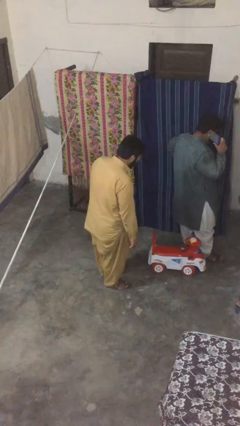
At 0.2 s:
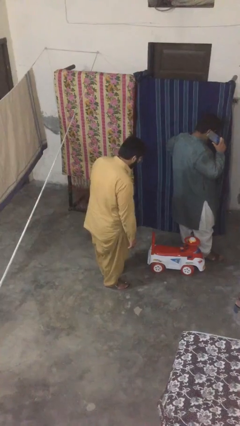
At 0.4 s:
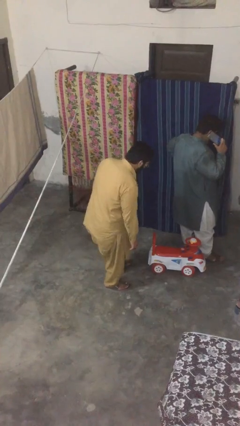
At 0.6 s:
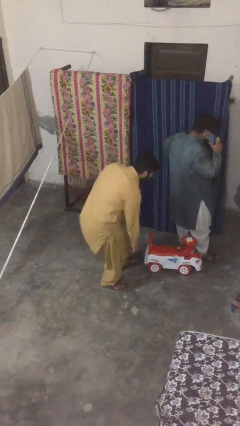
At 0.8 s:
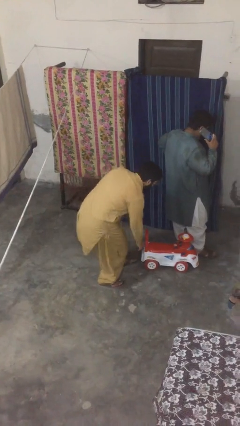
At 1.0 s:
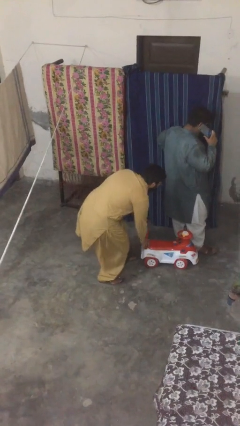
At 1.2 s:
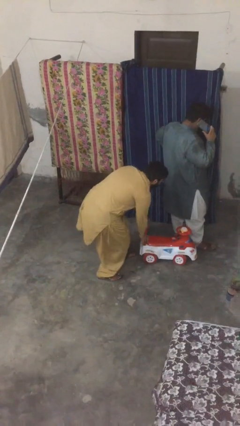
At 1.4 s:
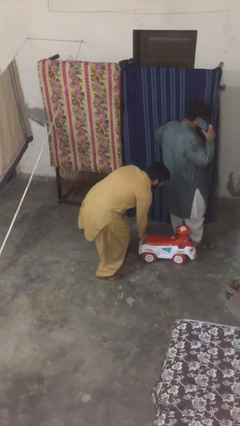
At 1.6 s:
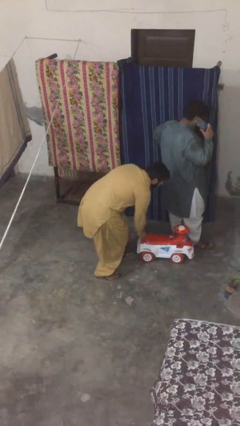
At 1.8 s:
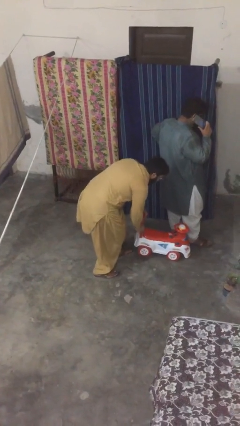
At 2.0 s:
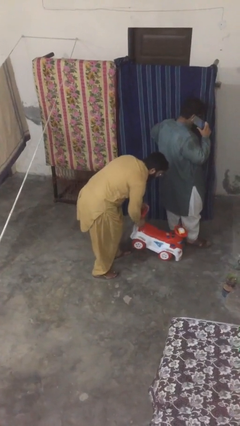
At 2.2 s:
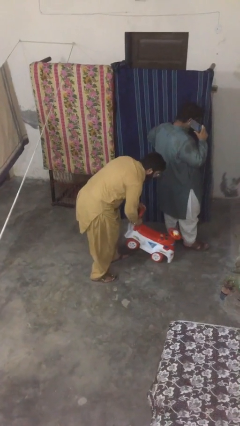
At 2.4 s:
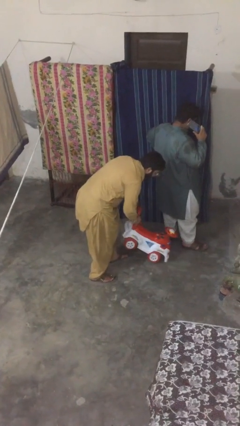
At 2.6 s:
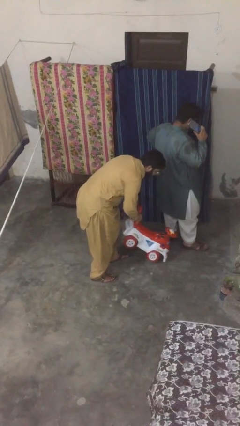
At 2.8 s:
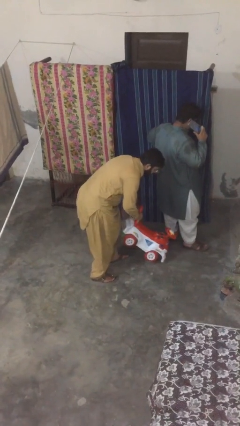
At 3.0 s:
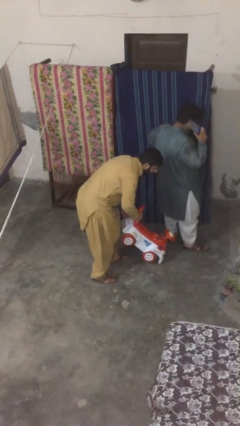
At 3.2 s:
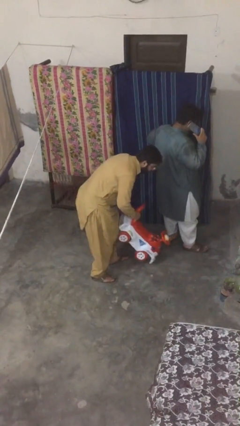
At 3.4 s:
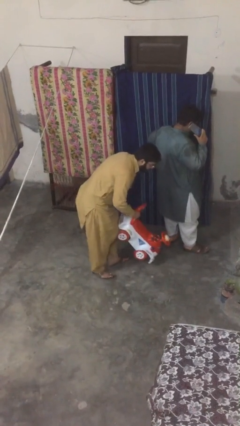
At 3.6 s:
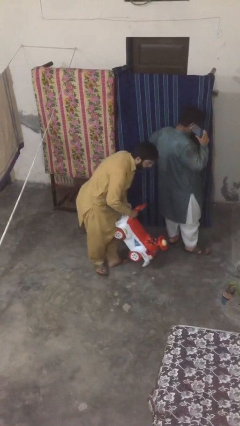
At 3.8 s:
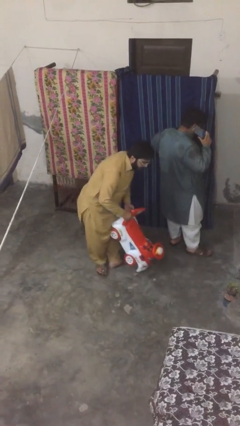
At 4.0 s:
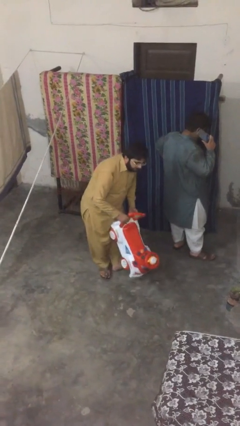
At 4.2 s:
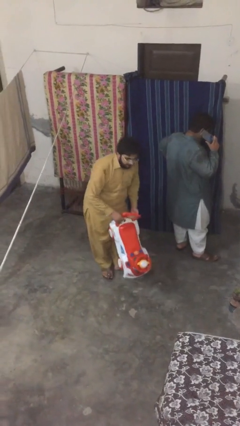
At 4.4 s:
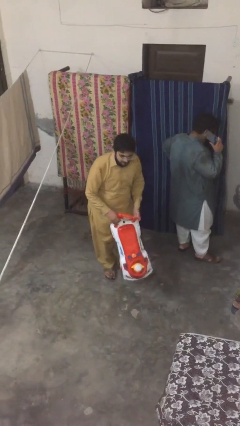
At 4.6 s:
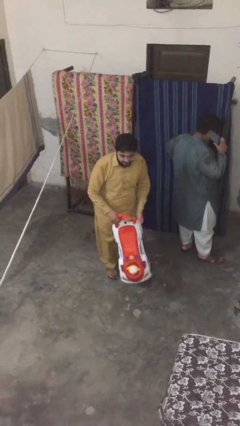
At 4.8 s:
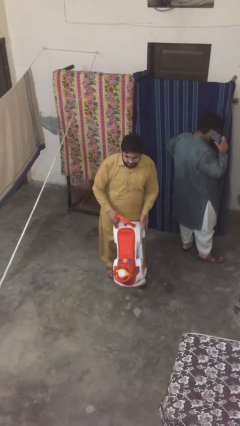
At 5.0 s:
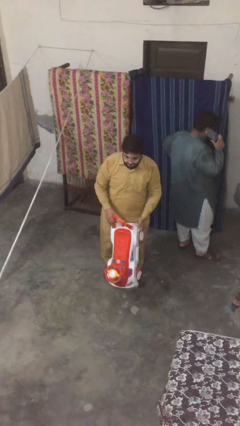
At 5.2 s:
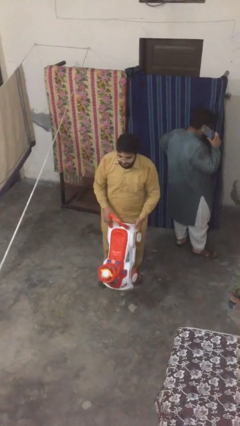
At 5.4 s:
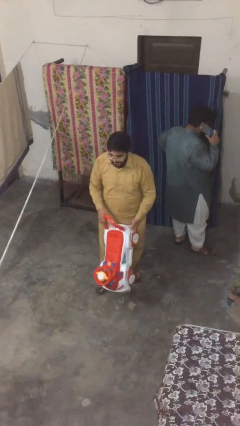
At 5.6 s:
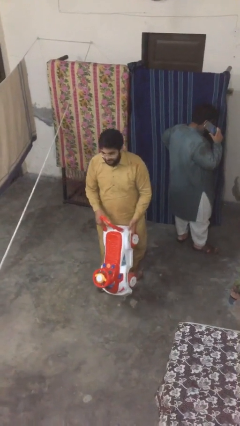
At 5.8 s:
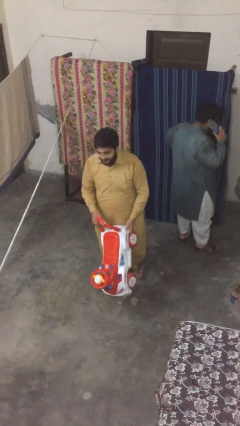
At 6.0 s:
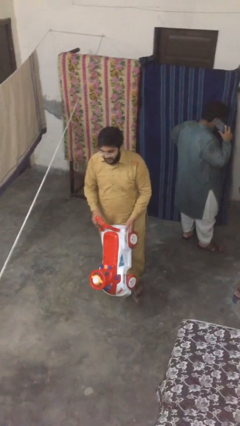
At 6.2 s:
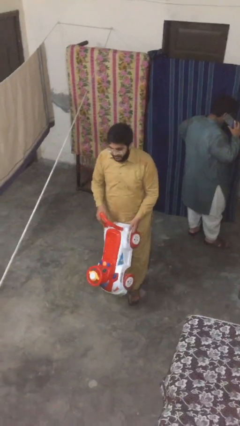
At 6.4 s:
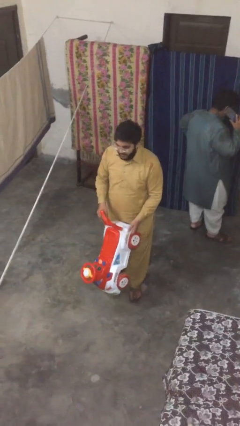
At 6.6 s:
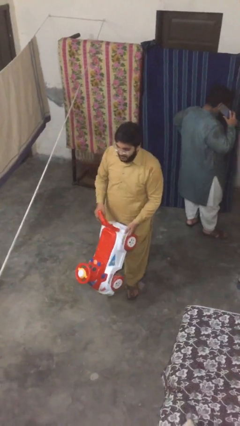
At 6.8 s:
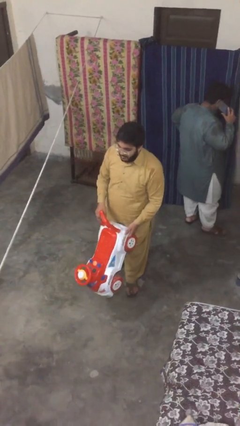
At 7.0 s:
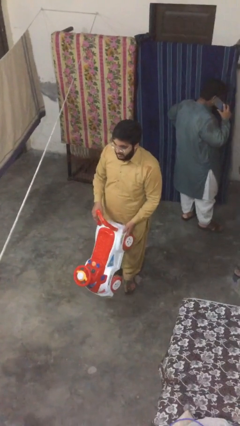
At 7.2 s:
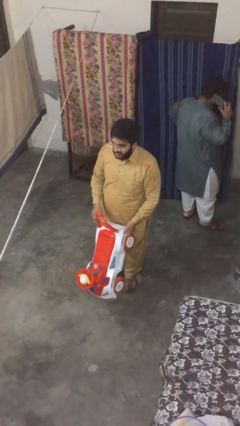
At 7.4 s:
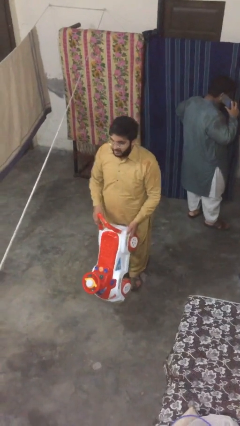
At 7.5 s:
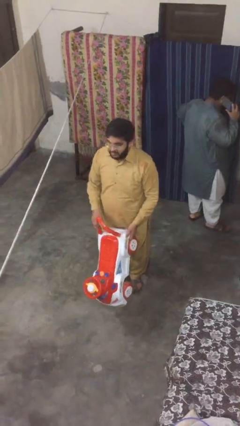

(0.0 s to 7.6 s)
person steals object from person

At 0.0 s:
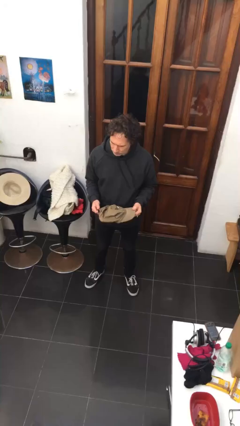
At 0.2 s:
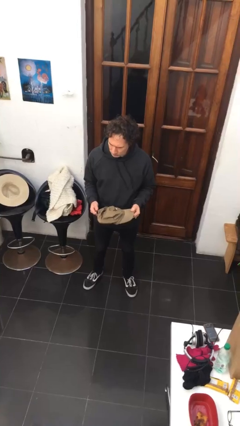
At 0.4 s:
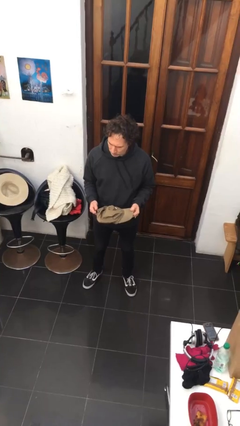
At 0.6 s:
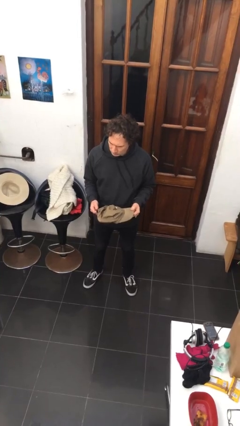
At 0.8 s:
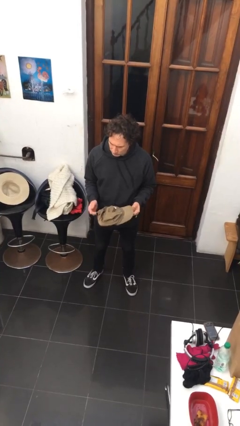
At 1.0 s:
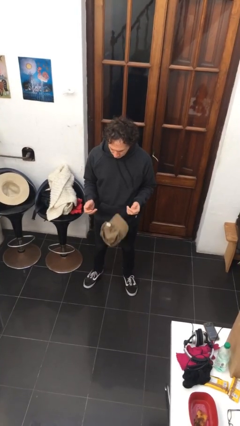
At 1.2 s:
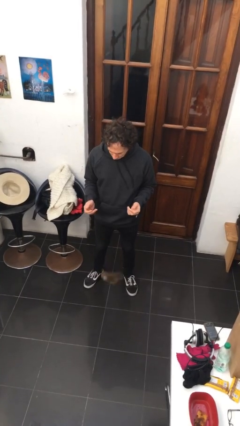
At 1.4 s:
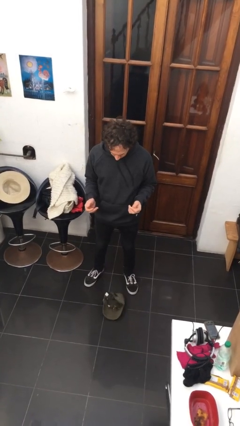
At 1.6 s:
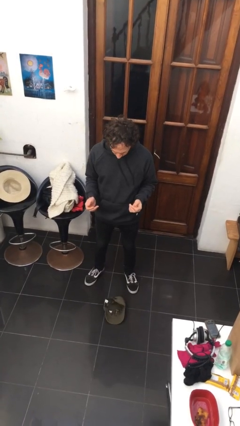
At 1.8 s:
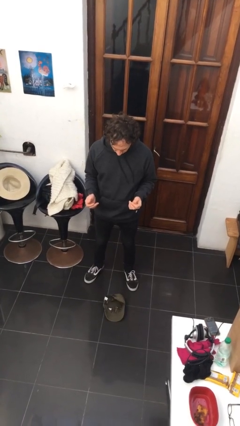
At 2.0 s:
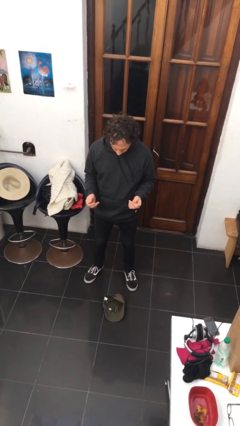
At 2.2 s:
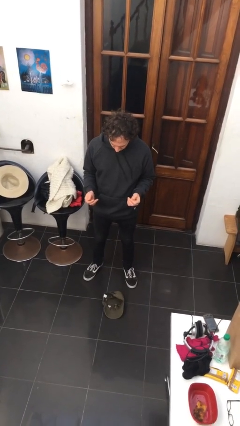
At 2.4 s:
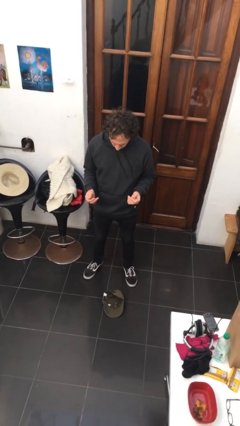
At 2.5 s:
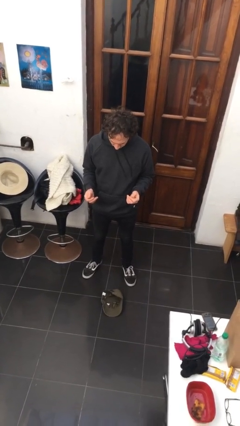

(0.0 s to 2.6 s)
person drops object

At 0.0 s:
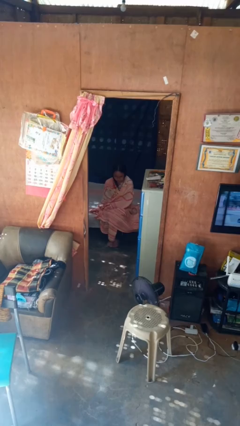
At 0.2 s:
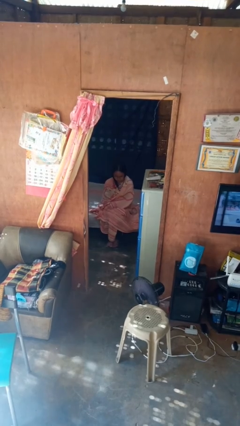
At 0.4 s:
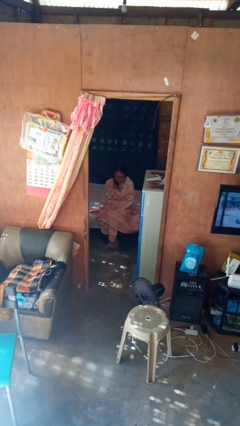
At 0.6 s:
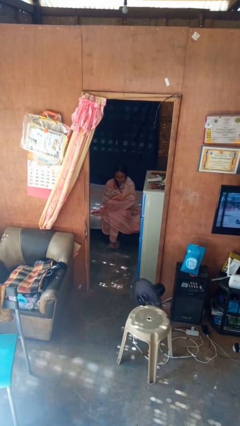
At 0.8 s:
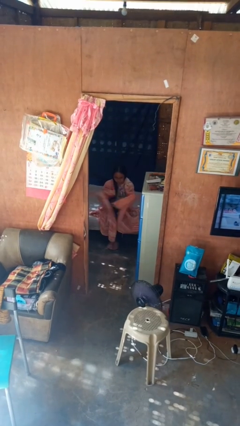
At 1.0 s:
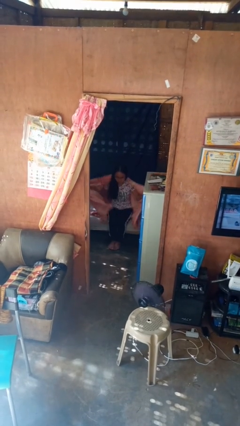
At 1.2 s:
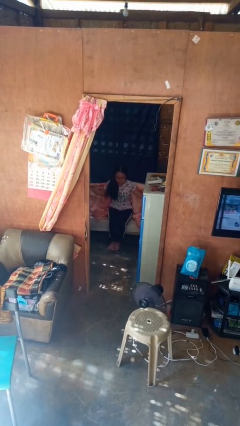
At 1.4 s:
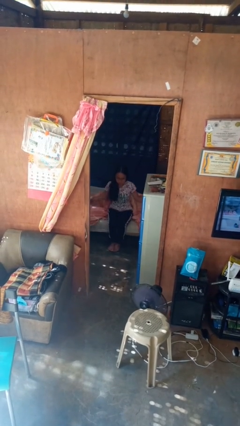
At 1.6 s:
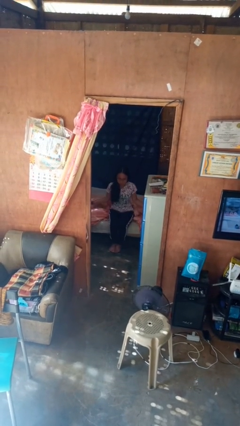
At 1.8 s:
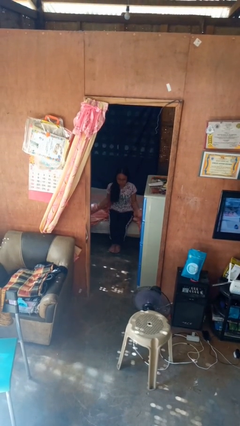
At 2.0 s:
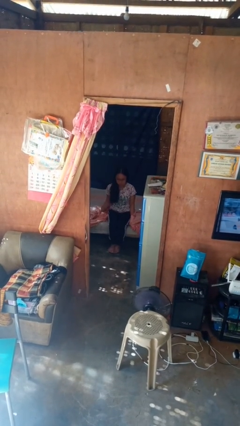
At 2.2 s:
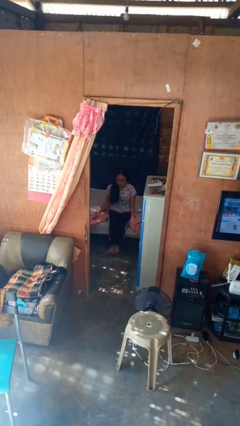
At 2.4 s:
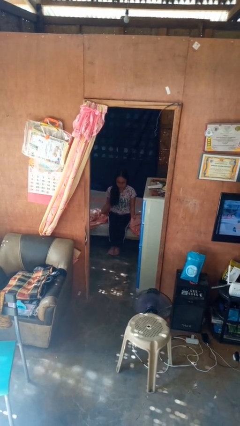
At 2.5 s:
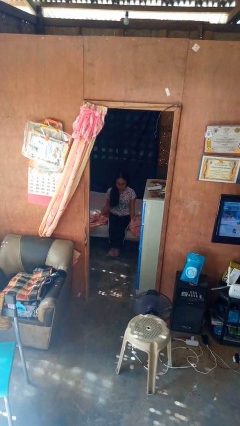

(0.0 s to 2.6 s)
person uncovers with blanket

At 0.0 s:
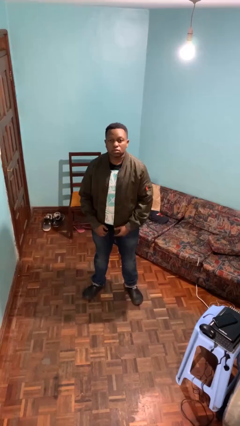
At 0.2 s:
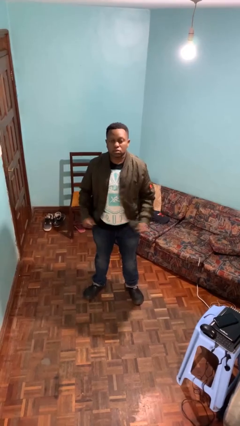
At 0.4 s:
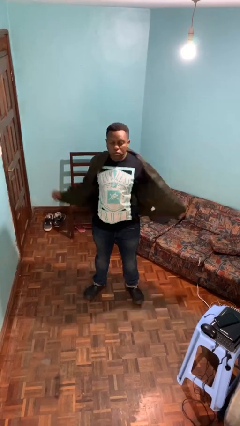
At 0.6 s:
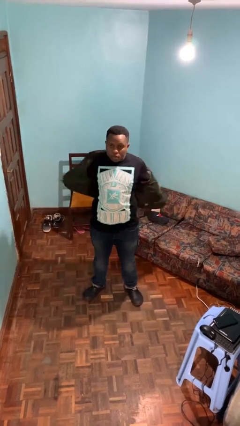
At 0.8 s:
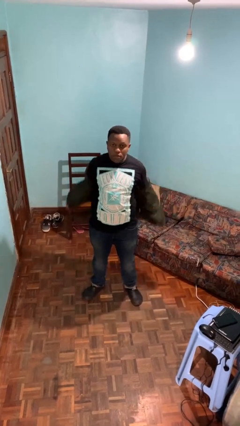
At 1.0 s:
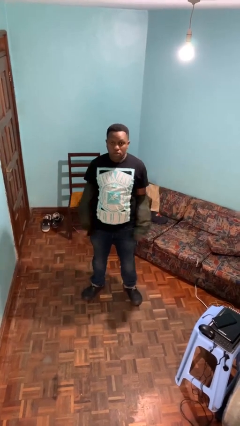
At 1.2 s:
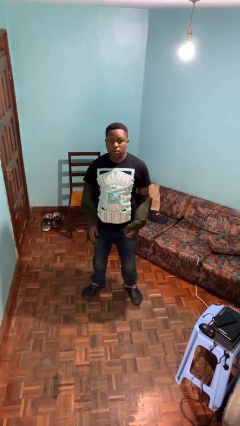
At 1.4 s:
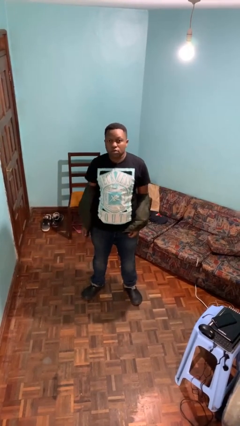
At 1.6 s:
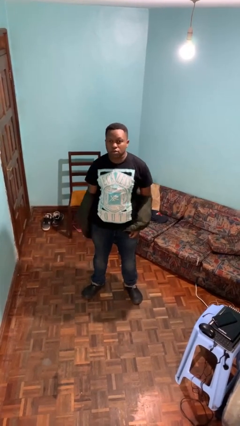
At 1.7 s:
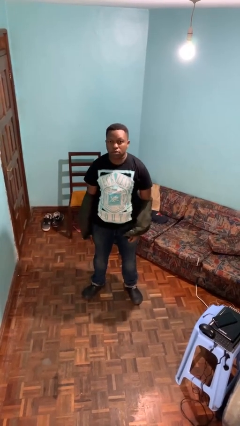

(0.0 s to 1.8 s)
person takes off jacket

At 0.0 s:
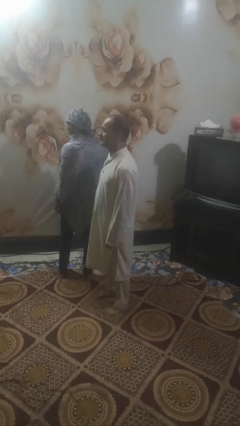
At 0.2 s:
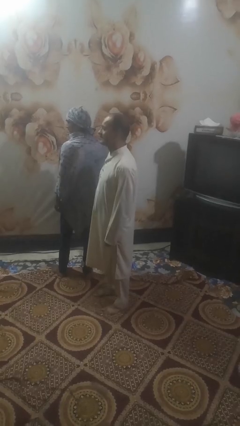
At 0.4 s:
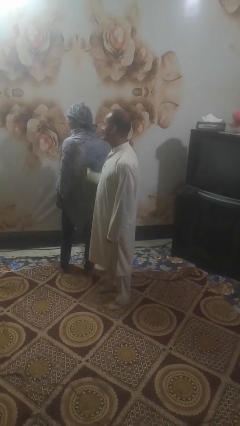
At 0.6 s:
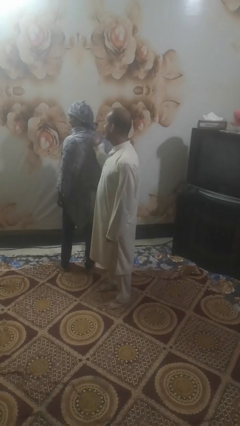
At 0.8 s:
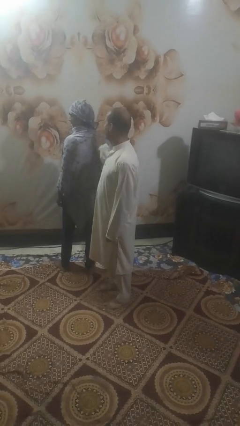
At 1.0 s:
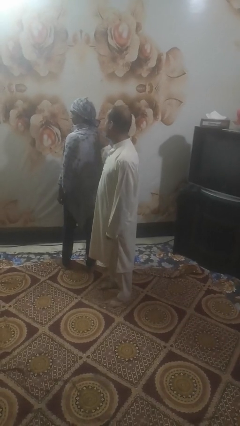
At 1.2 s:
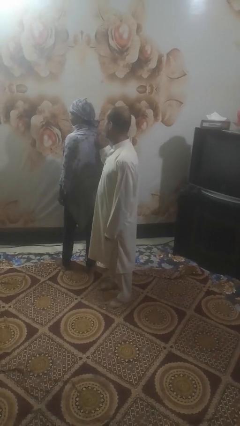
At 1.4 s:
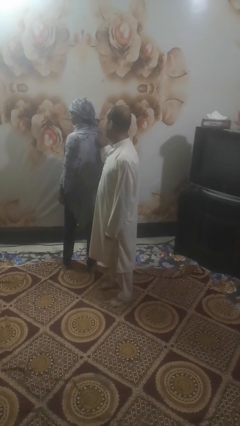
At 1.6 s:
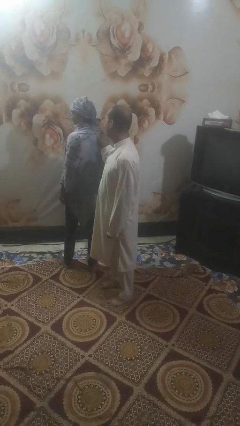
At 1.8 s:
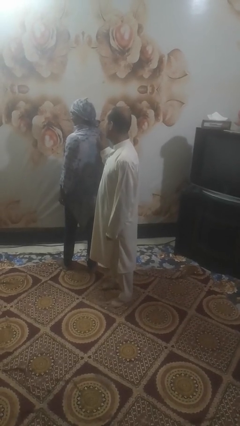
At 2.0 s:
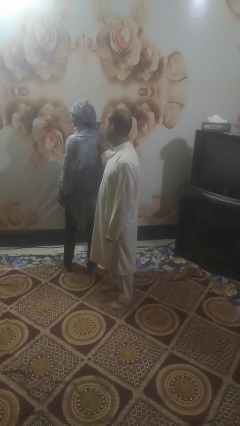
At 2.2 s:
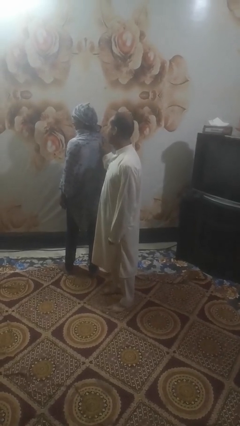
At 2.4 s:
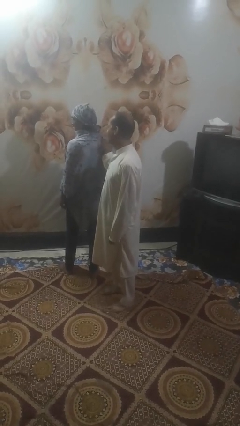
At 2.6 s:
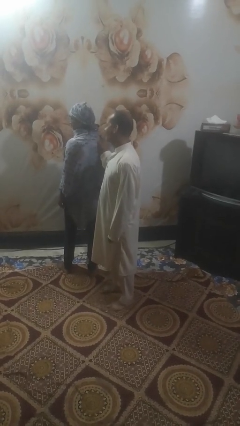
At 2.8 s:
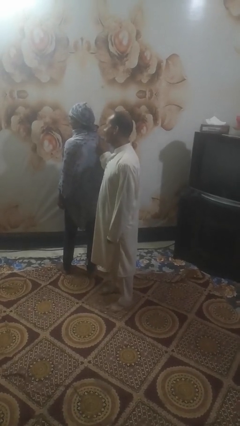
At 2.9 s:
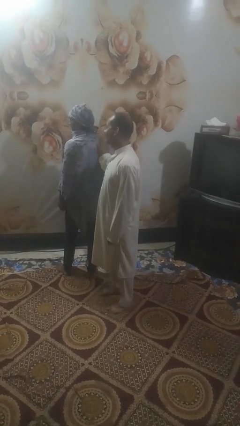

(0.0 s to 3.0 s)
person touches back of person
